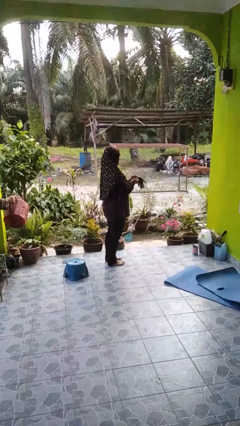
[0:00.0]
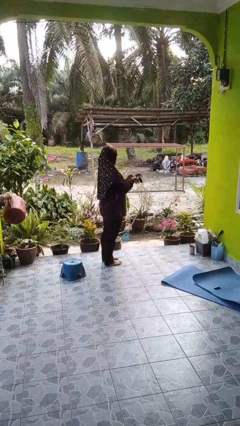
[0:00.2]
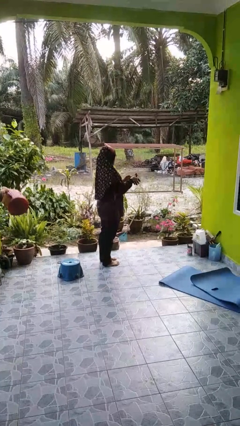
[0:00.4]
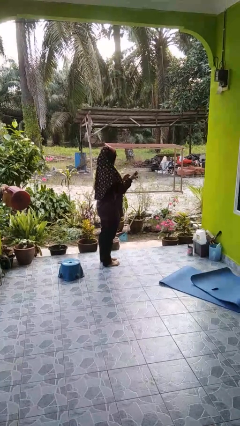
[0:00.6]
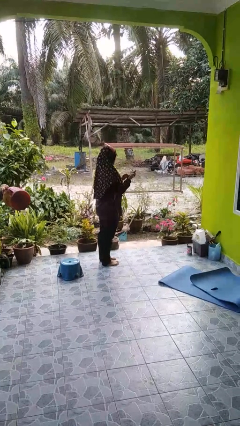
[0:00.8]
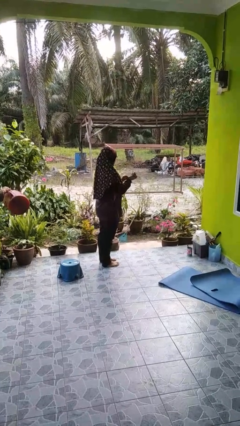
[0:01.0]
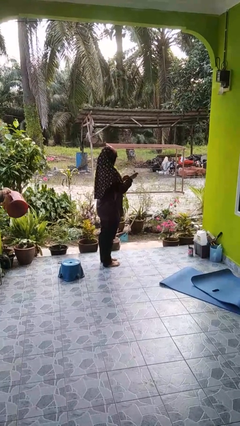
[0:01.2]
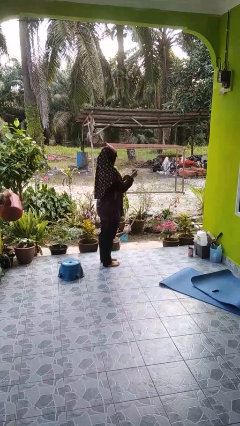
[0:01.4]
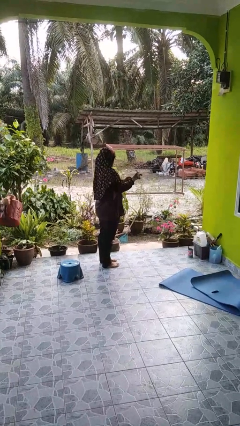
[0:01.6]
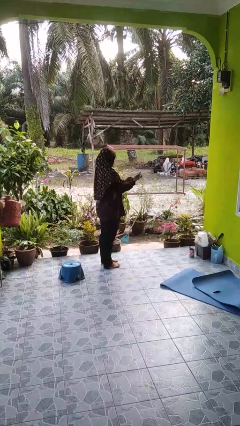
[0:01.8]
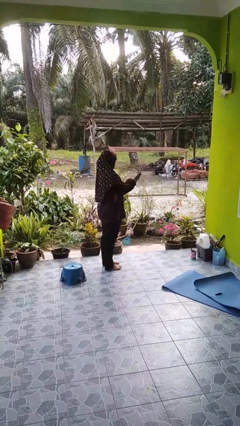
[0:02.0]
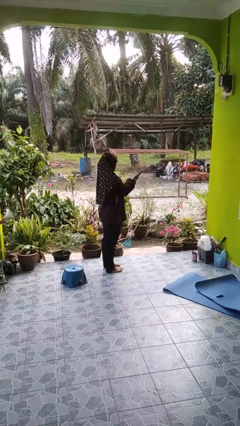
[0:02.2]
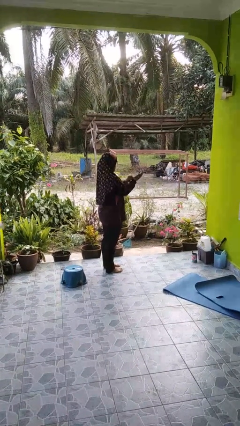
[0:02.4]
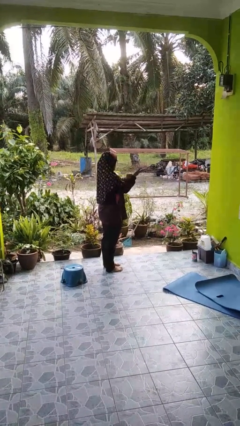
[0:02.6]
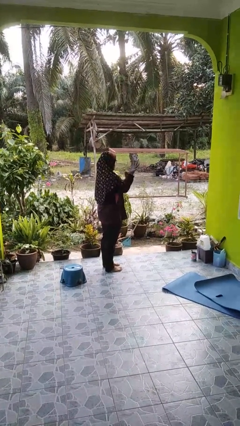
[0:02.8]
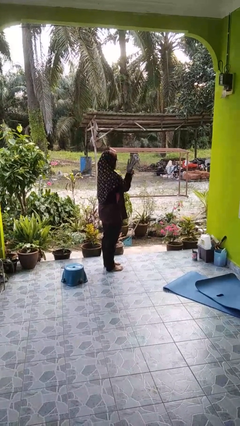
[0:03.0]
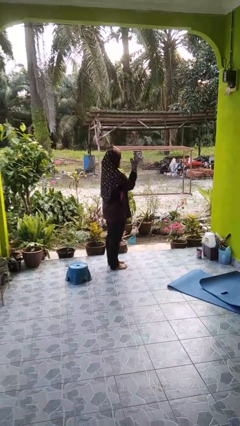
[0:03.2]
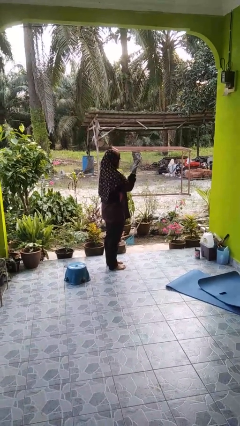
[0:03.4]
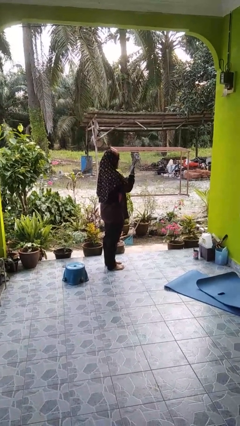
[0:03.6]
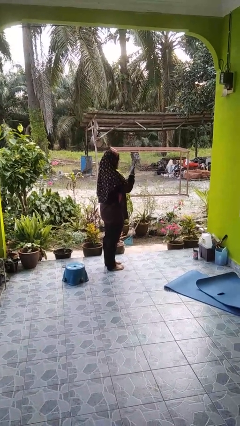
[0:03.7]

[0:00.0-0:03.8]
person puts on gloves

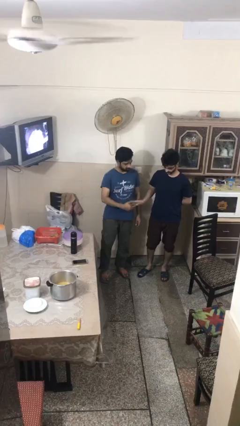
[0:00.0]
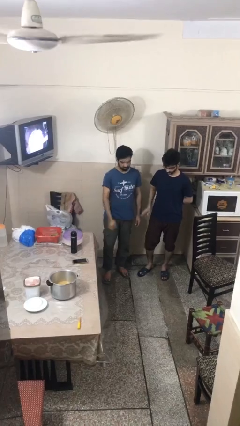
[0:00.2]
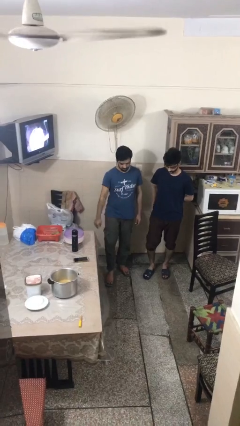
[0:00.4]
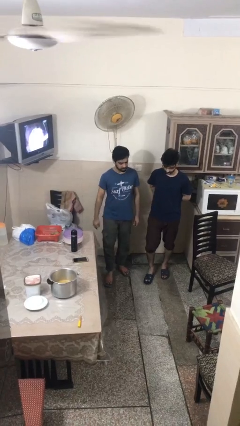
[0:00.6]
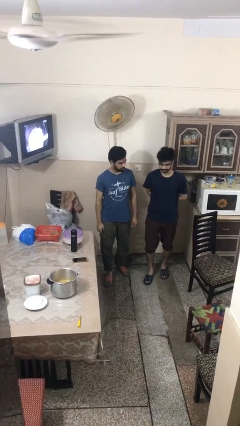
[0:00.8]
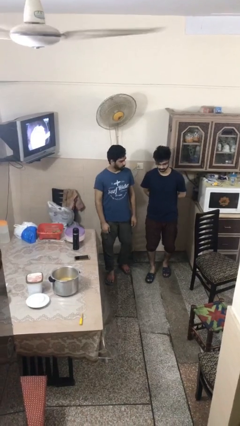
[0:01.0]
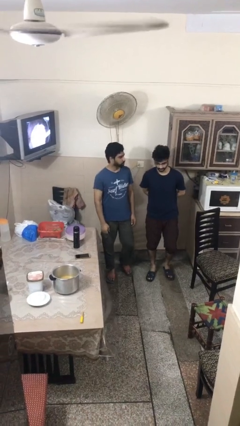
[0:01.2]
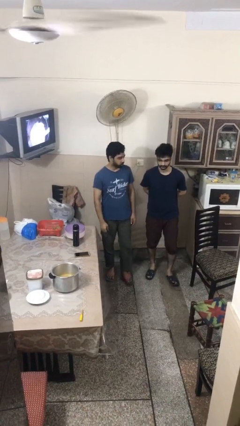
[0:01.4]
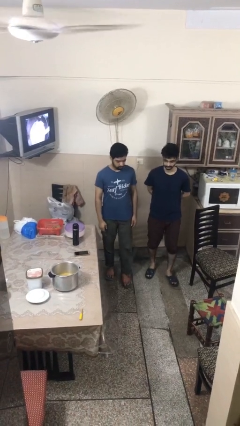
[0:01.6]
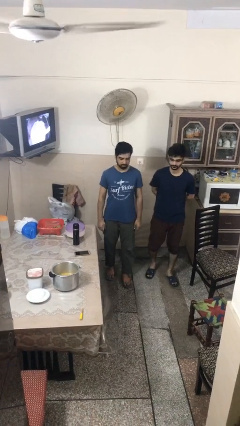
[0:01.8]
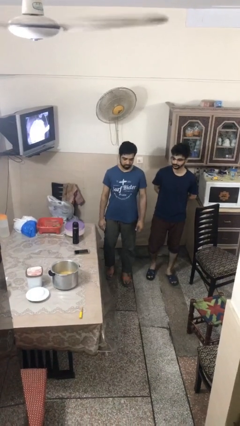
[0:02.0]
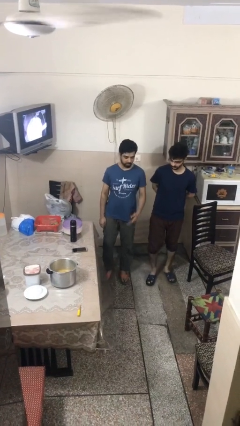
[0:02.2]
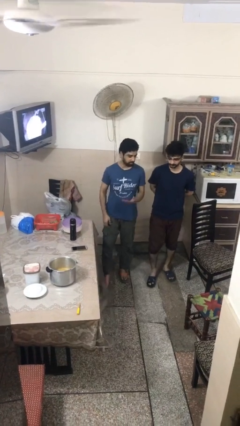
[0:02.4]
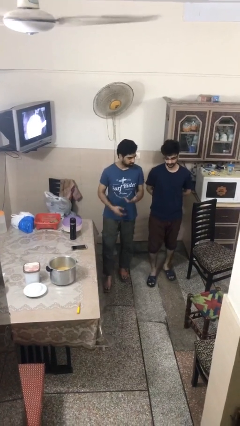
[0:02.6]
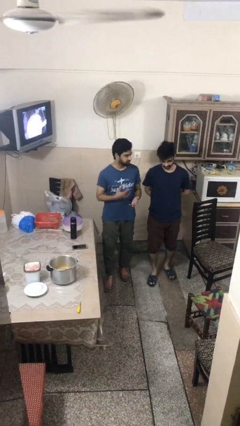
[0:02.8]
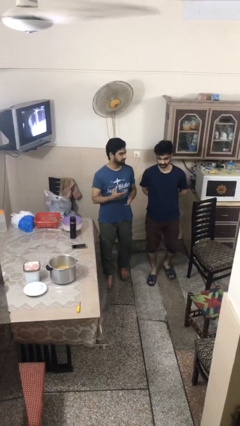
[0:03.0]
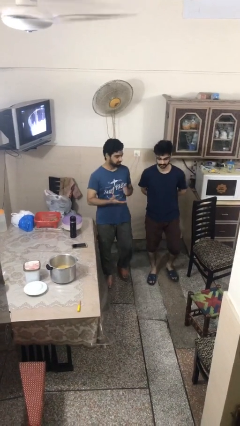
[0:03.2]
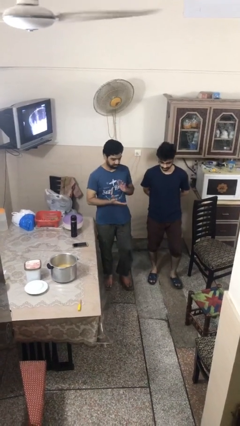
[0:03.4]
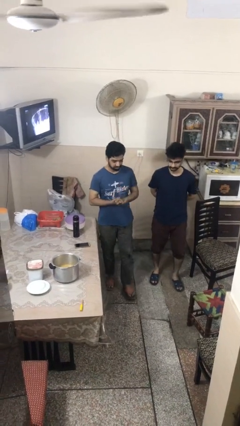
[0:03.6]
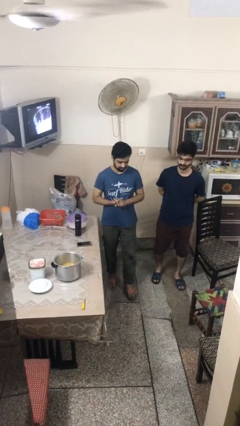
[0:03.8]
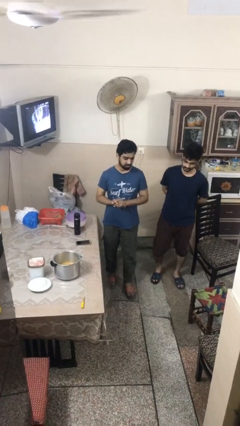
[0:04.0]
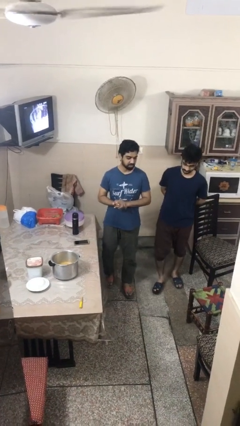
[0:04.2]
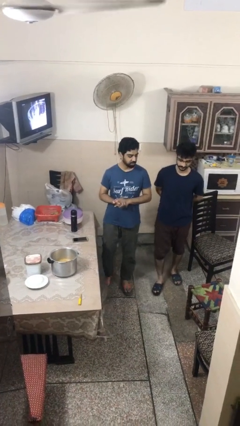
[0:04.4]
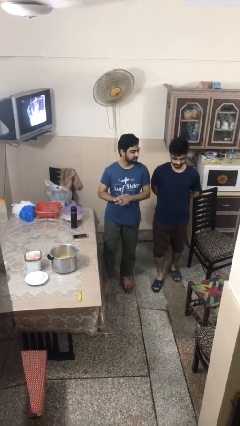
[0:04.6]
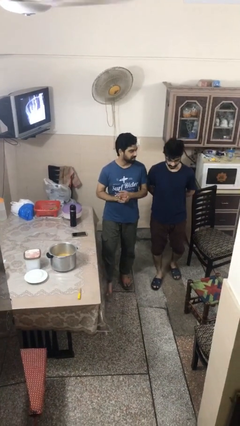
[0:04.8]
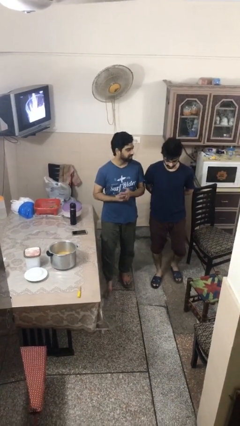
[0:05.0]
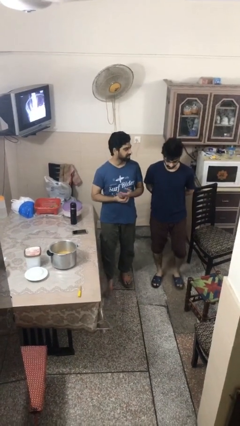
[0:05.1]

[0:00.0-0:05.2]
person talks to person

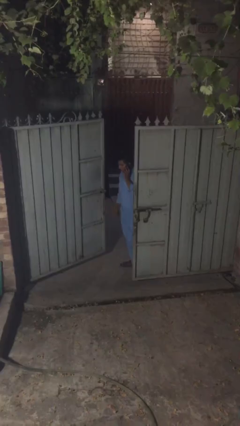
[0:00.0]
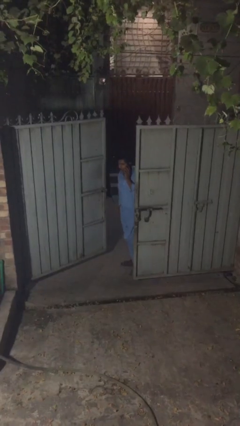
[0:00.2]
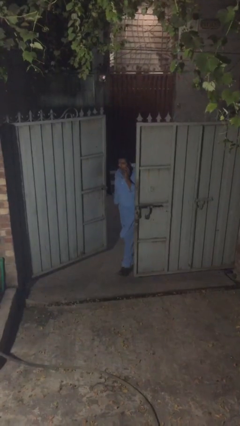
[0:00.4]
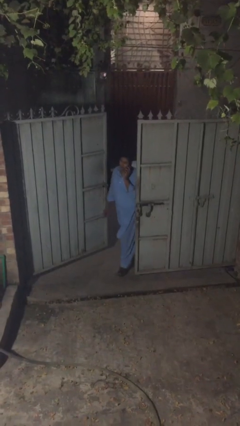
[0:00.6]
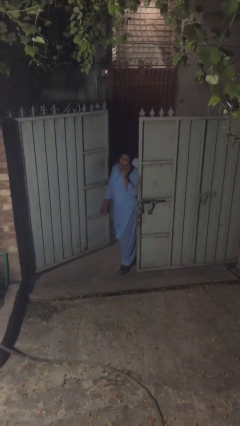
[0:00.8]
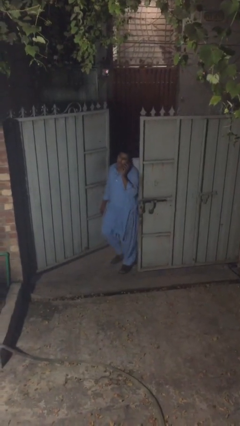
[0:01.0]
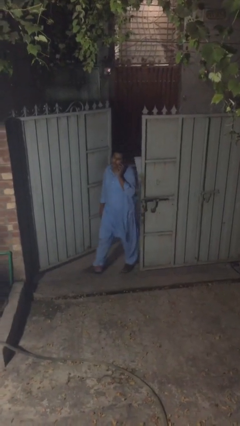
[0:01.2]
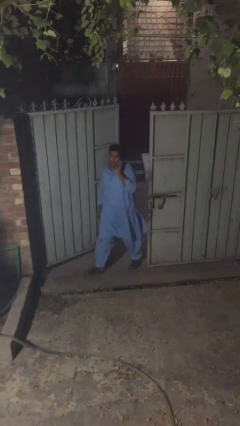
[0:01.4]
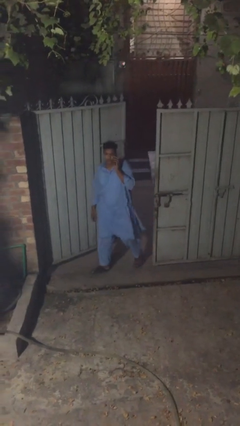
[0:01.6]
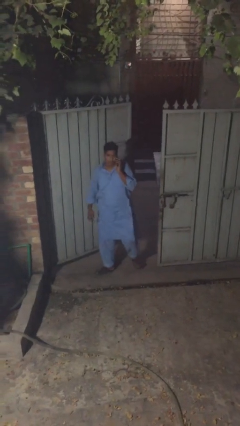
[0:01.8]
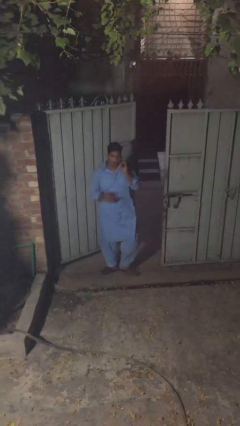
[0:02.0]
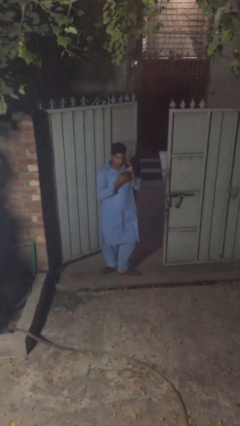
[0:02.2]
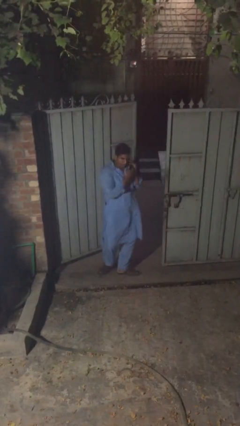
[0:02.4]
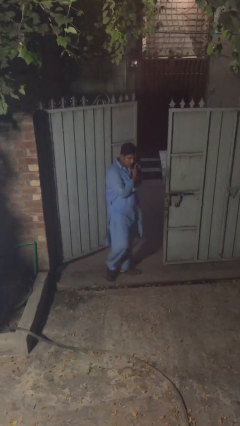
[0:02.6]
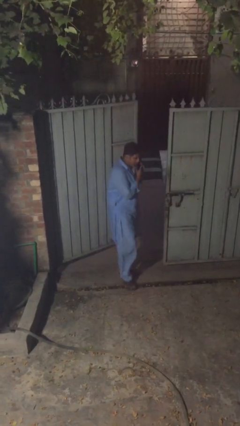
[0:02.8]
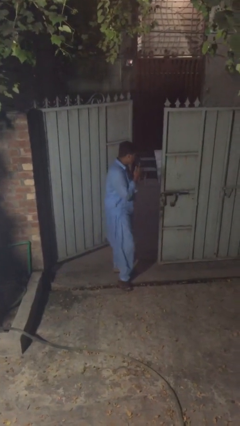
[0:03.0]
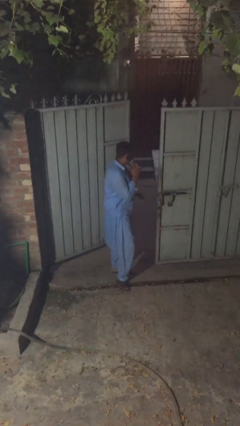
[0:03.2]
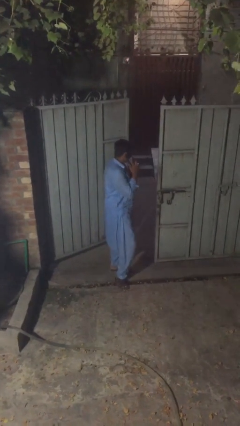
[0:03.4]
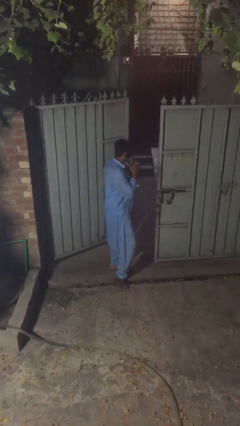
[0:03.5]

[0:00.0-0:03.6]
person enters scene through structure

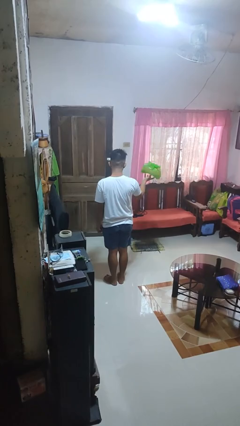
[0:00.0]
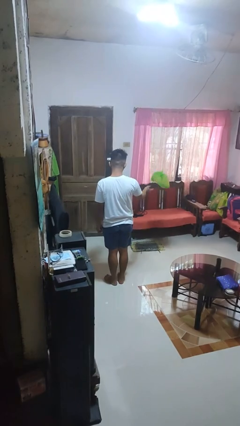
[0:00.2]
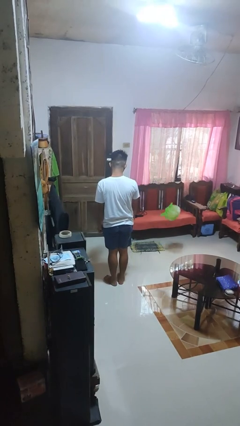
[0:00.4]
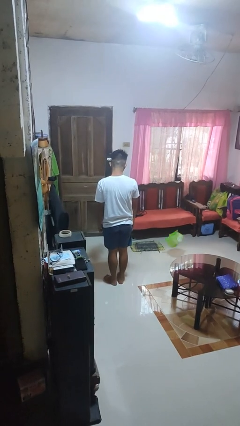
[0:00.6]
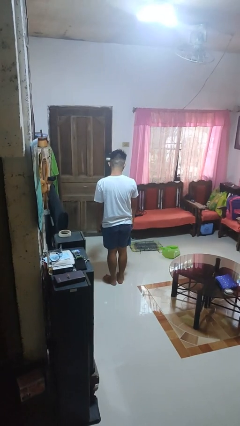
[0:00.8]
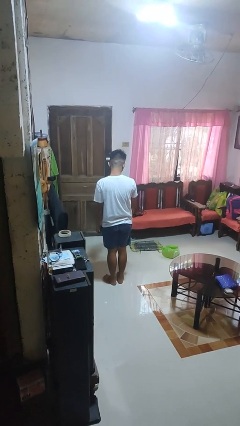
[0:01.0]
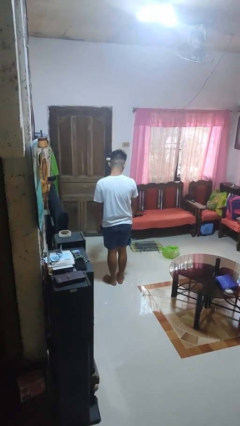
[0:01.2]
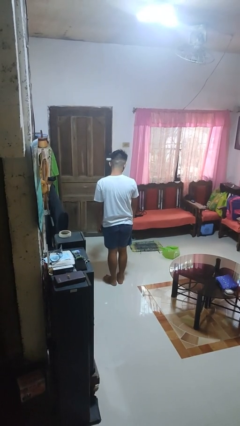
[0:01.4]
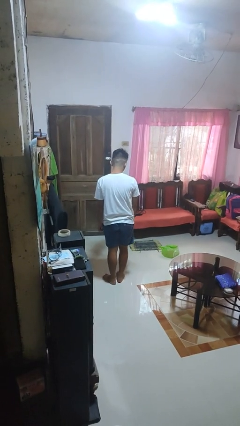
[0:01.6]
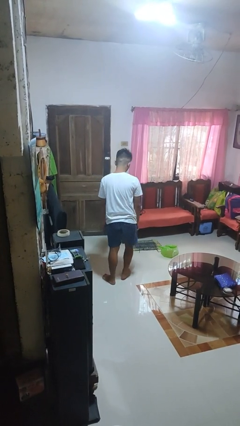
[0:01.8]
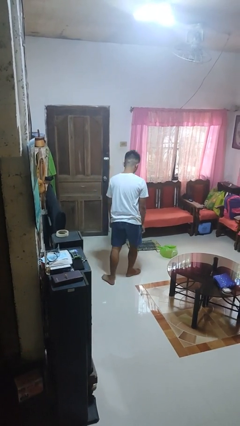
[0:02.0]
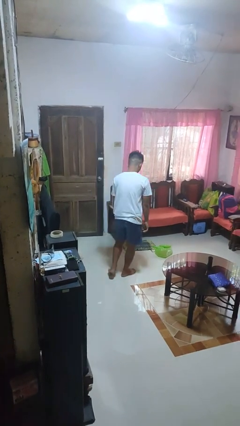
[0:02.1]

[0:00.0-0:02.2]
person throws object to ground

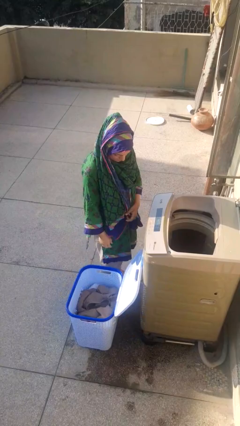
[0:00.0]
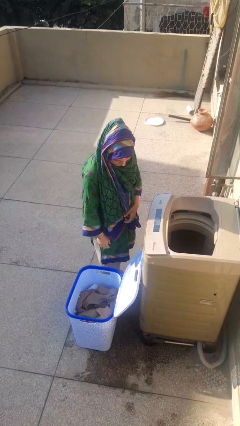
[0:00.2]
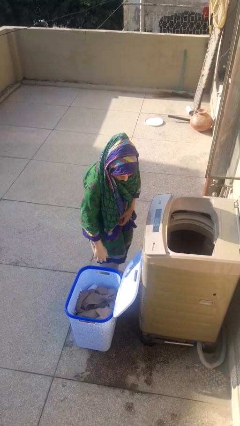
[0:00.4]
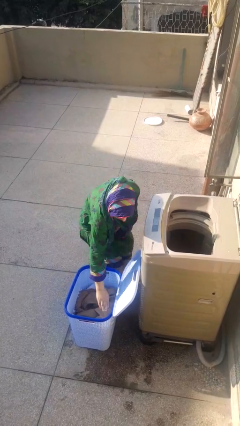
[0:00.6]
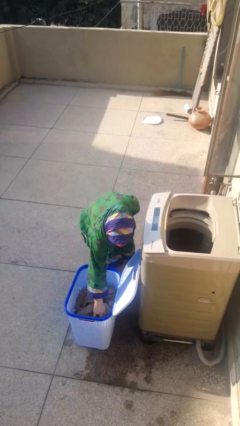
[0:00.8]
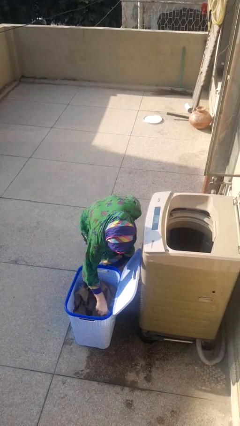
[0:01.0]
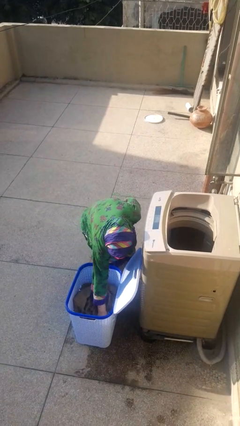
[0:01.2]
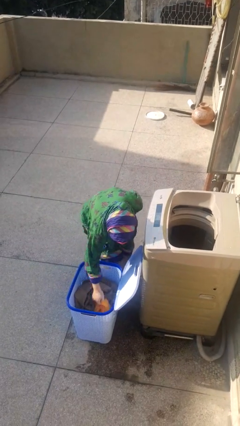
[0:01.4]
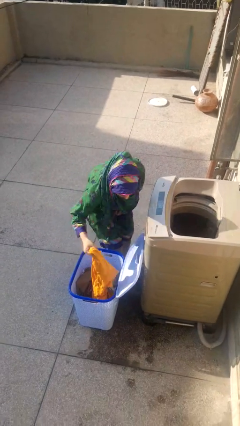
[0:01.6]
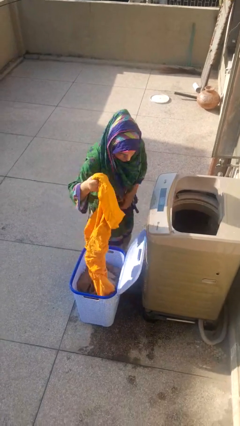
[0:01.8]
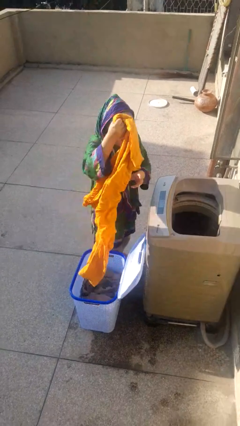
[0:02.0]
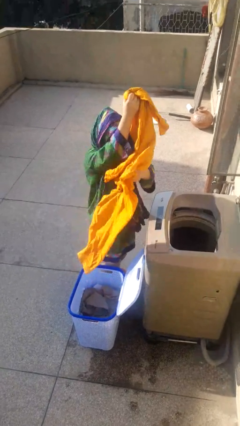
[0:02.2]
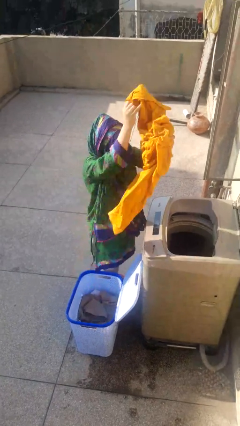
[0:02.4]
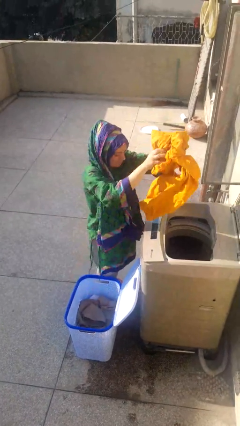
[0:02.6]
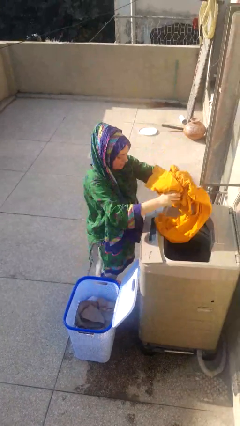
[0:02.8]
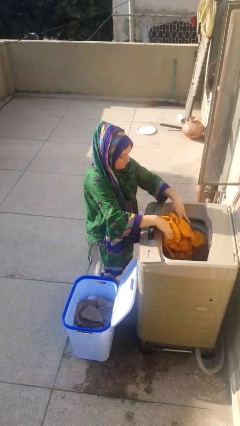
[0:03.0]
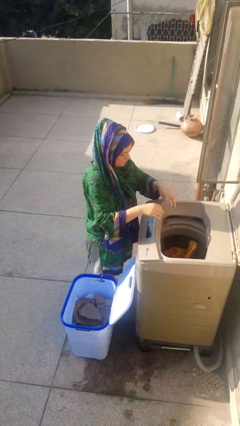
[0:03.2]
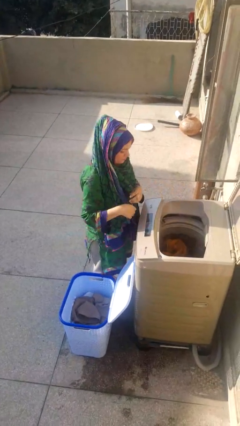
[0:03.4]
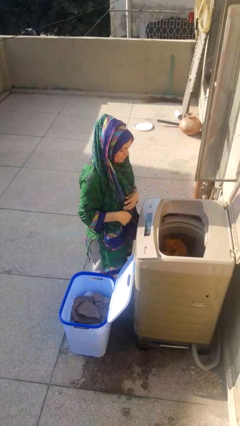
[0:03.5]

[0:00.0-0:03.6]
person loads clotheswasher
